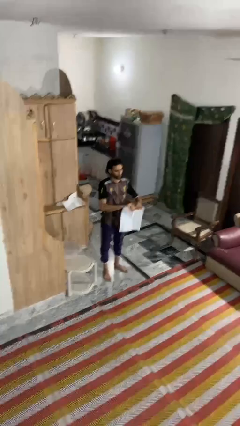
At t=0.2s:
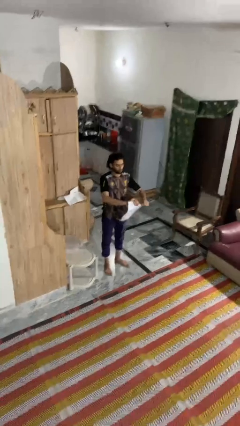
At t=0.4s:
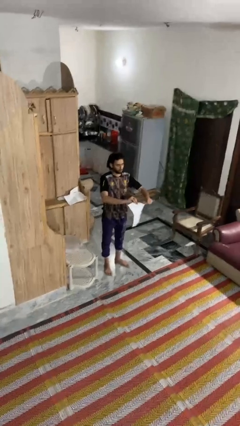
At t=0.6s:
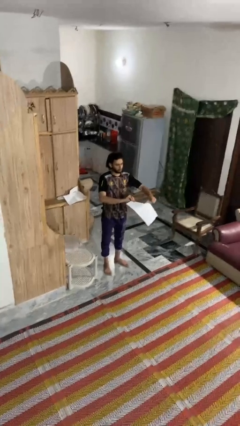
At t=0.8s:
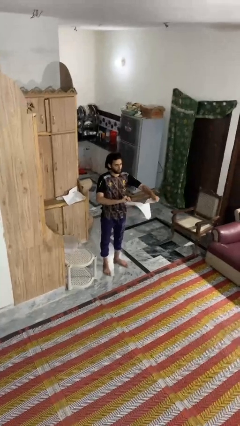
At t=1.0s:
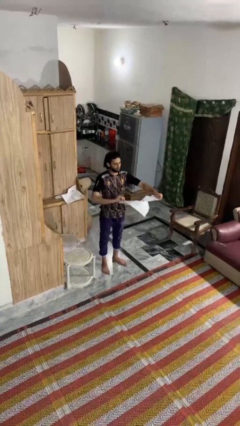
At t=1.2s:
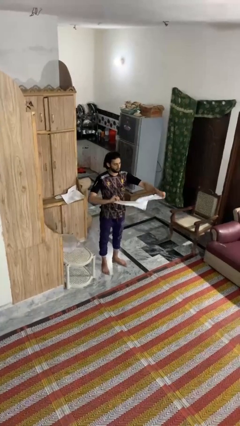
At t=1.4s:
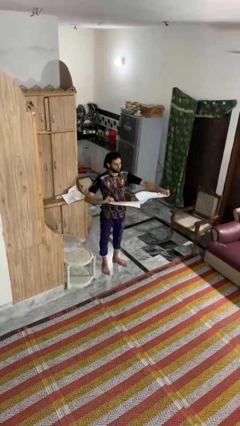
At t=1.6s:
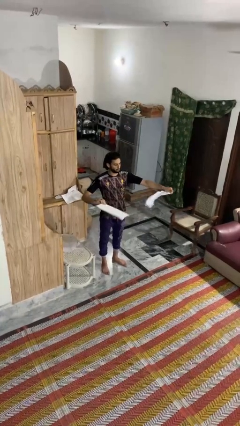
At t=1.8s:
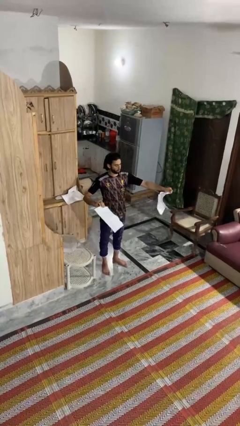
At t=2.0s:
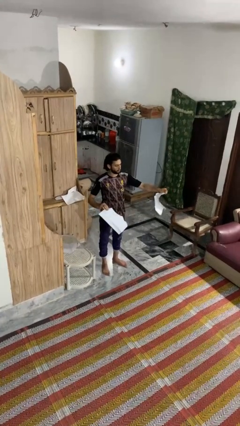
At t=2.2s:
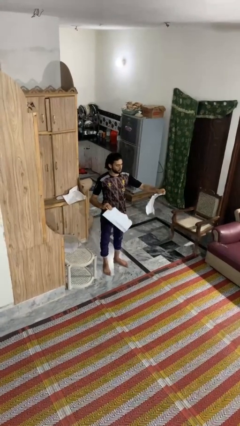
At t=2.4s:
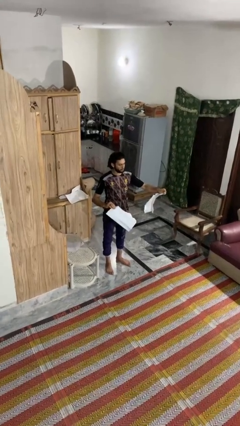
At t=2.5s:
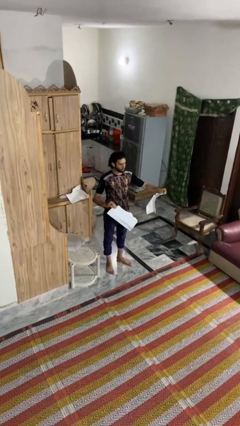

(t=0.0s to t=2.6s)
person tears paper

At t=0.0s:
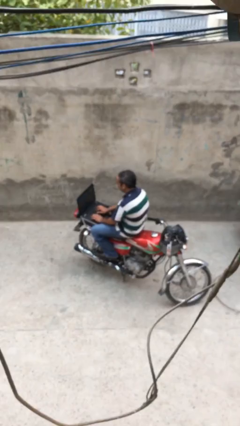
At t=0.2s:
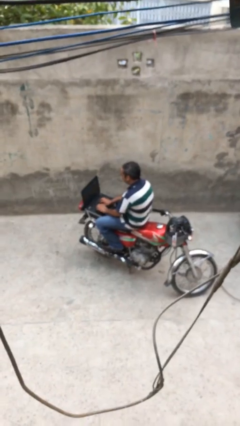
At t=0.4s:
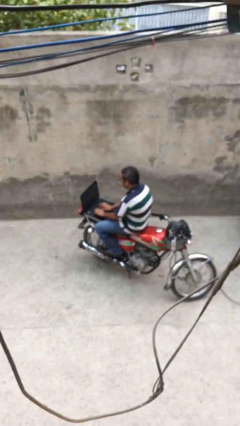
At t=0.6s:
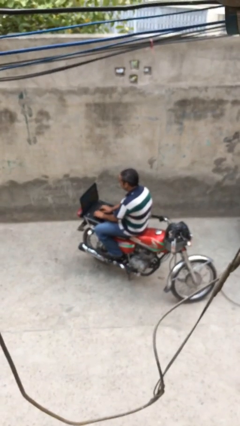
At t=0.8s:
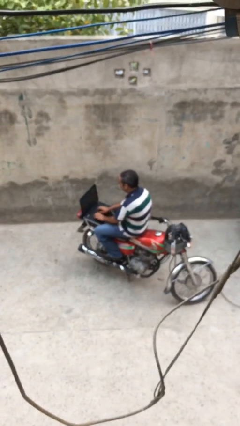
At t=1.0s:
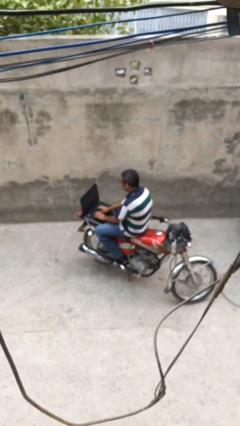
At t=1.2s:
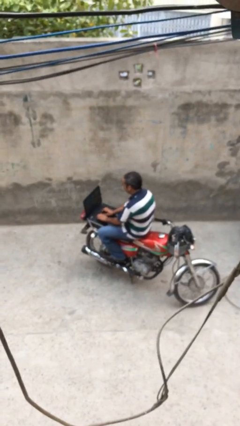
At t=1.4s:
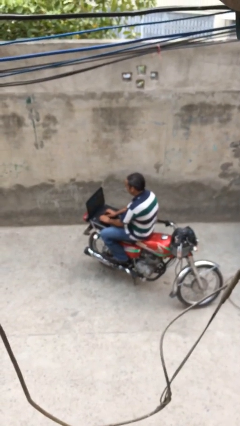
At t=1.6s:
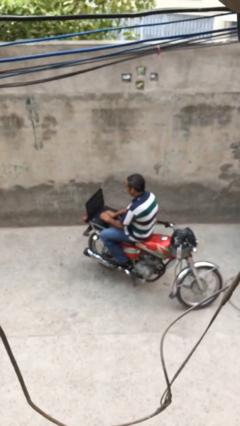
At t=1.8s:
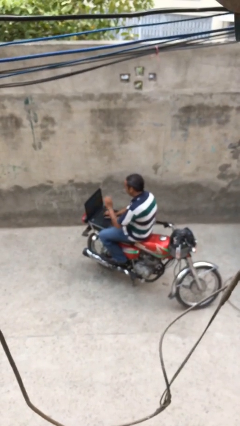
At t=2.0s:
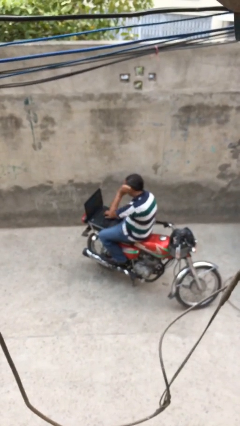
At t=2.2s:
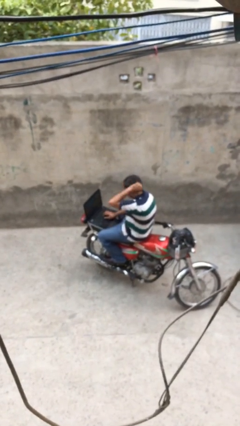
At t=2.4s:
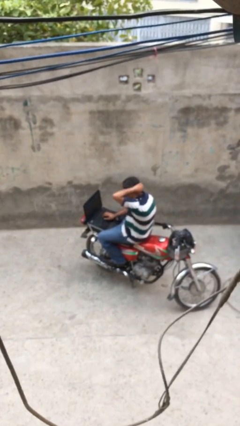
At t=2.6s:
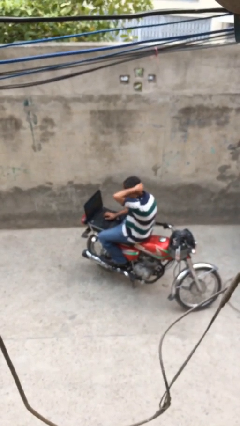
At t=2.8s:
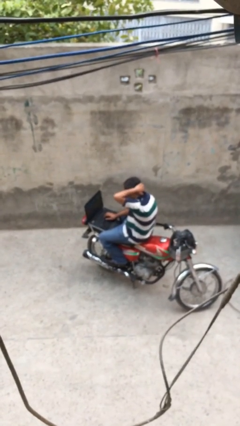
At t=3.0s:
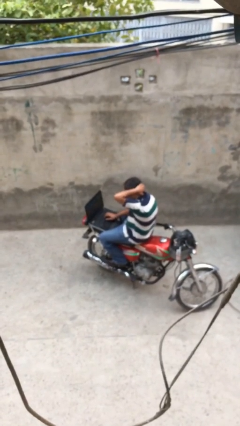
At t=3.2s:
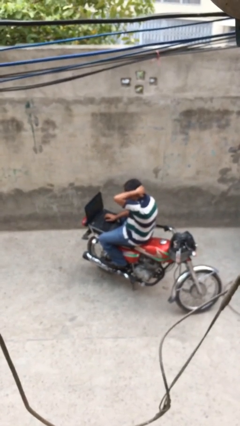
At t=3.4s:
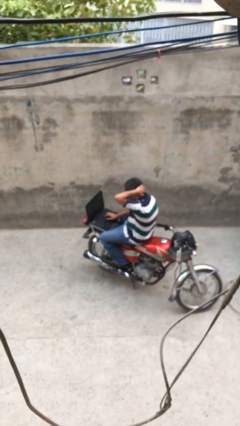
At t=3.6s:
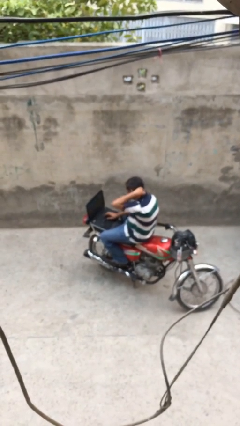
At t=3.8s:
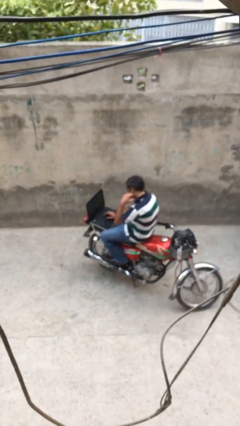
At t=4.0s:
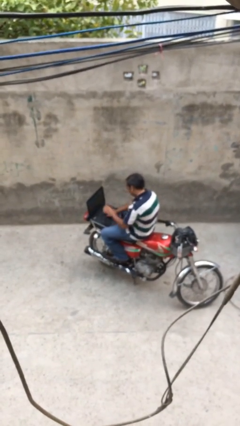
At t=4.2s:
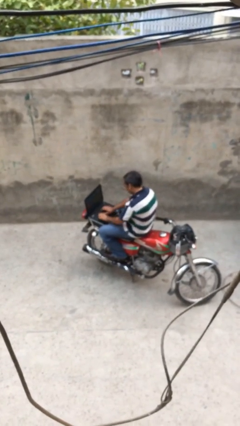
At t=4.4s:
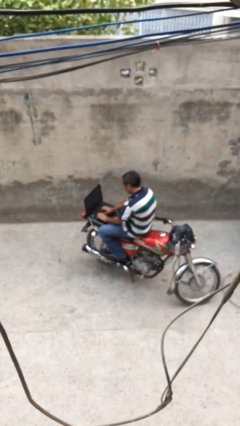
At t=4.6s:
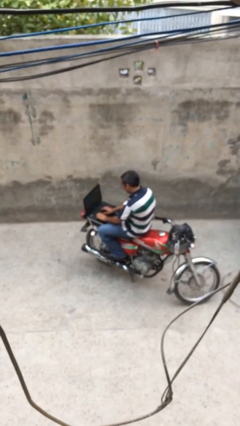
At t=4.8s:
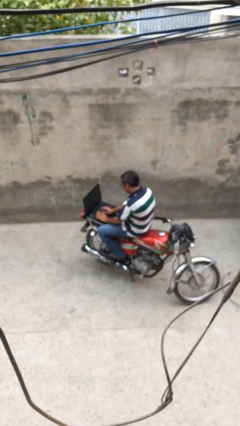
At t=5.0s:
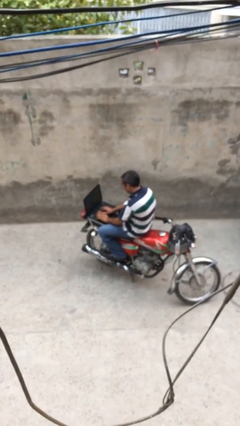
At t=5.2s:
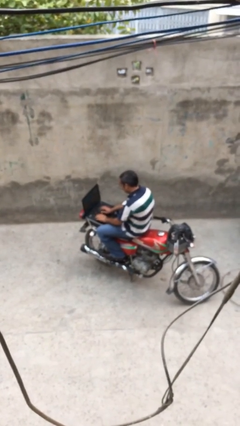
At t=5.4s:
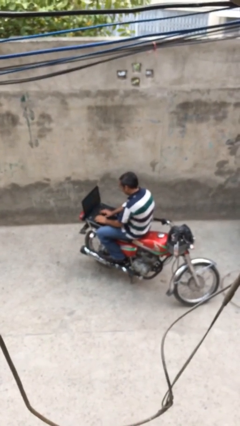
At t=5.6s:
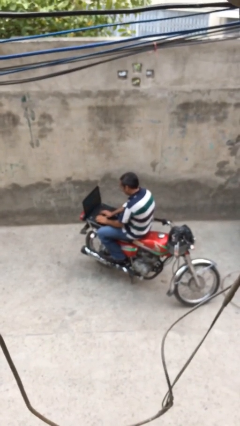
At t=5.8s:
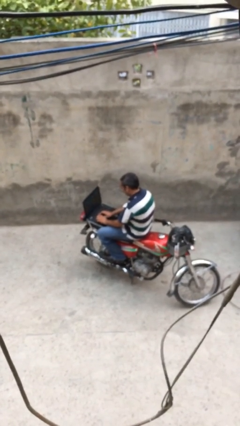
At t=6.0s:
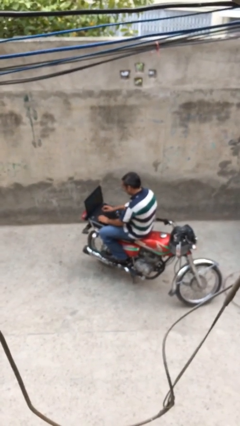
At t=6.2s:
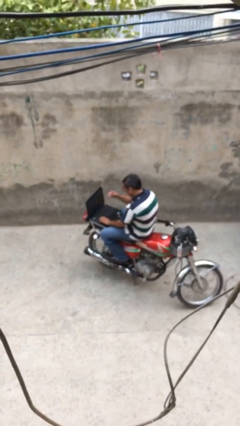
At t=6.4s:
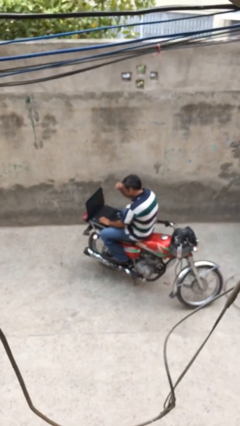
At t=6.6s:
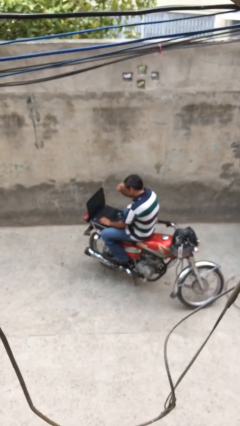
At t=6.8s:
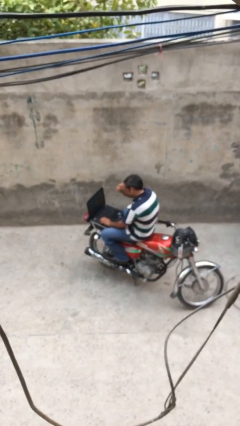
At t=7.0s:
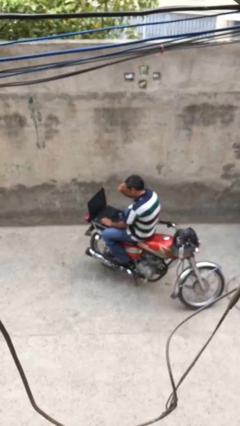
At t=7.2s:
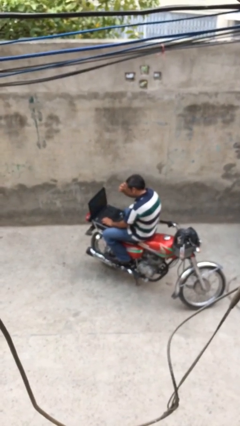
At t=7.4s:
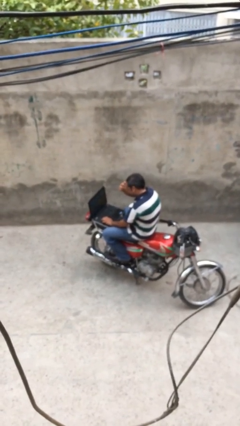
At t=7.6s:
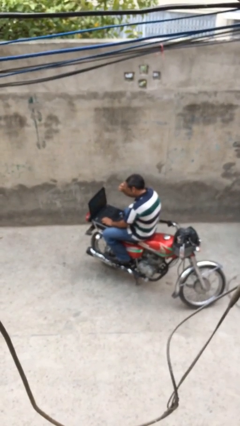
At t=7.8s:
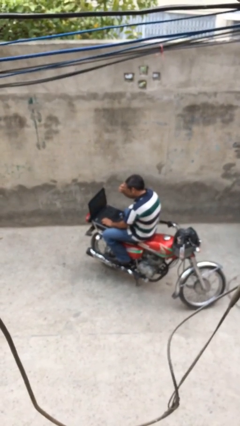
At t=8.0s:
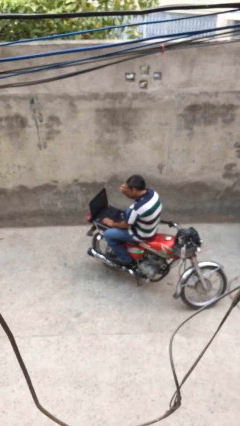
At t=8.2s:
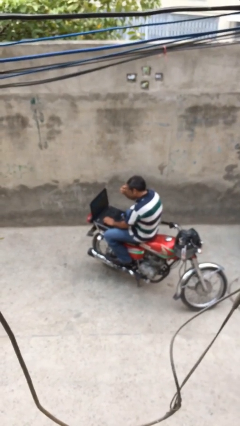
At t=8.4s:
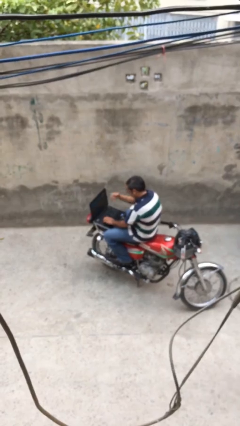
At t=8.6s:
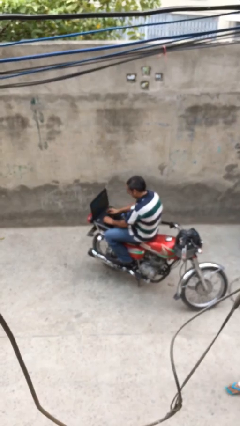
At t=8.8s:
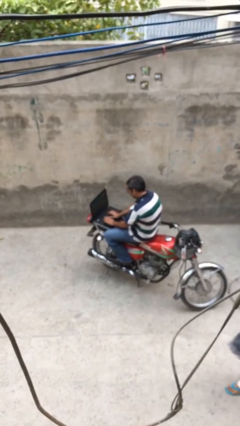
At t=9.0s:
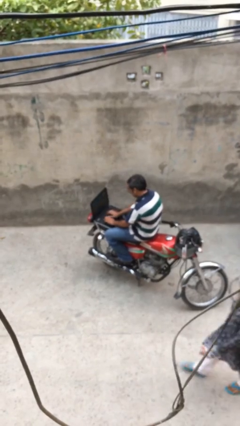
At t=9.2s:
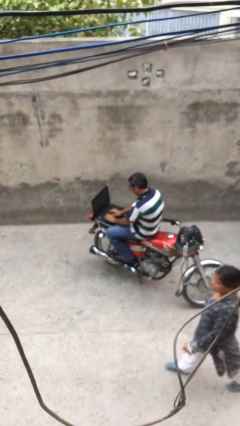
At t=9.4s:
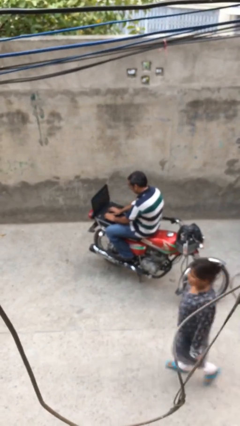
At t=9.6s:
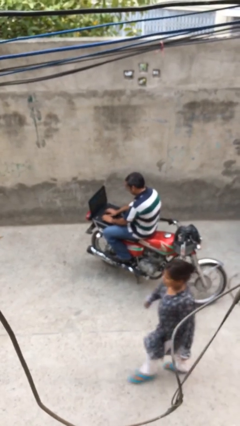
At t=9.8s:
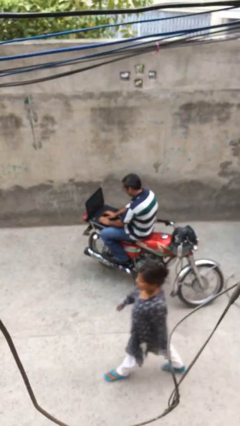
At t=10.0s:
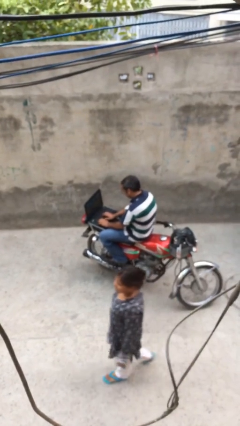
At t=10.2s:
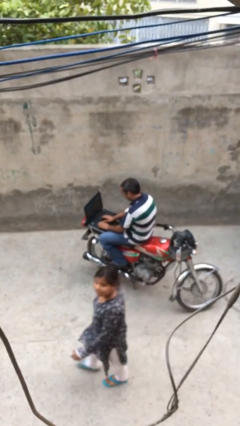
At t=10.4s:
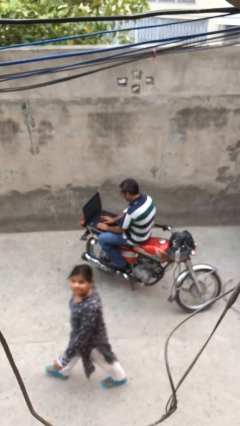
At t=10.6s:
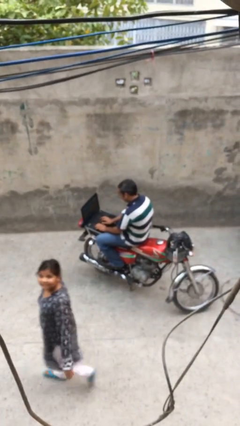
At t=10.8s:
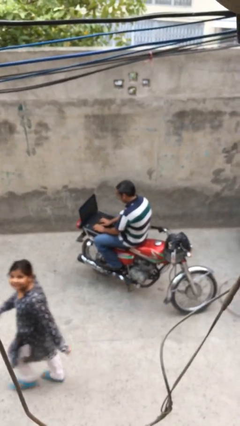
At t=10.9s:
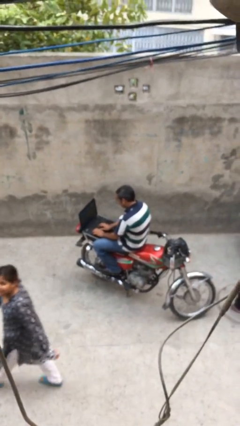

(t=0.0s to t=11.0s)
person interacts with laptop

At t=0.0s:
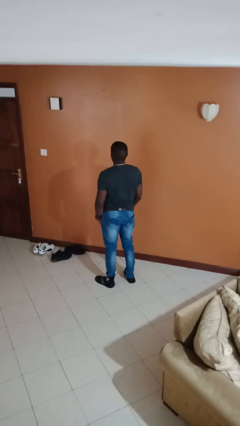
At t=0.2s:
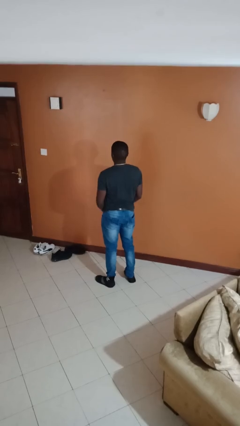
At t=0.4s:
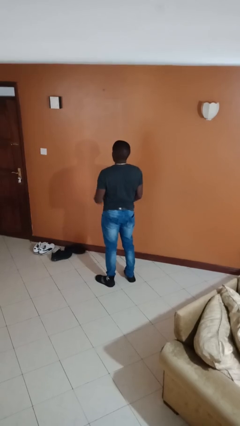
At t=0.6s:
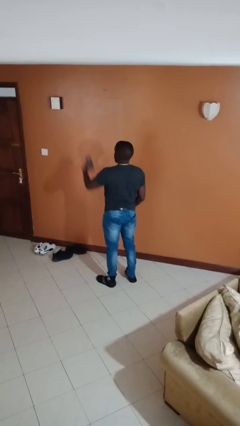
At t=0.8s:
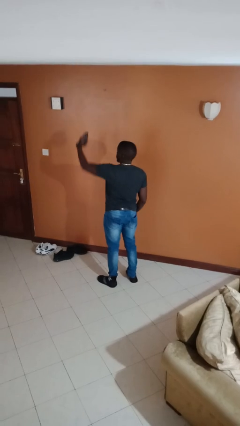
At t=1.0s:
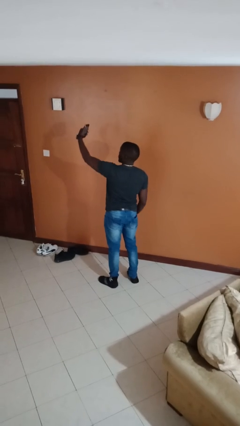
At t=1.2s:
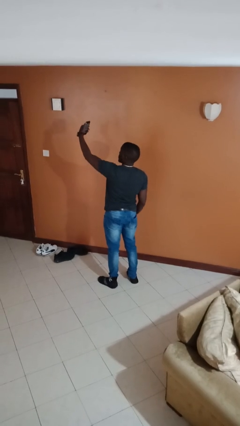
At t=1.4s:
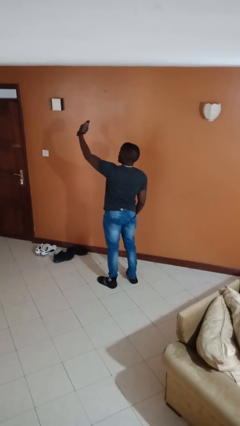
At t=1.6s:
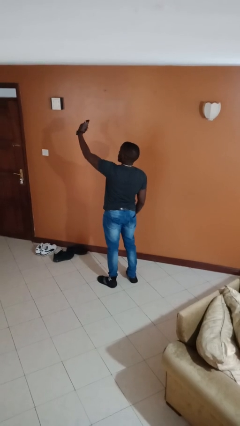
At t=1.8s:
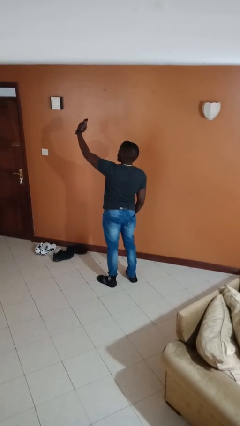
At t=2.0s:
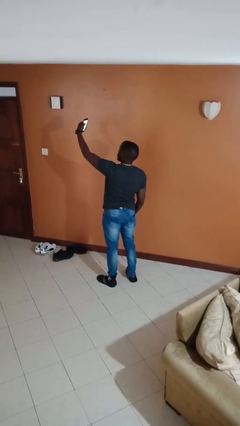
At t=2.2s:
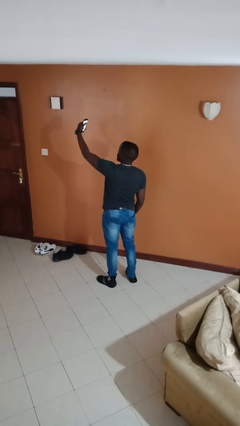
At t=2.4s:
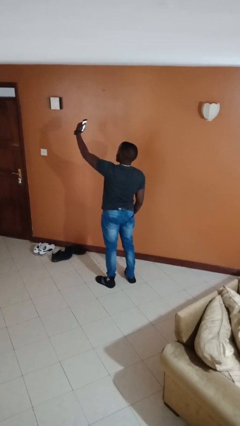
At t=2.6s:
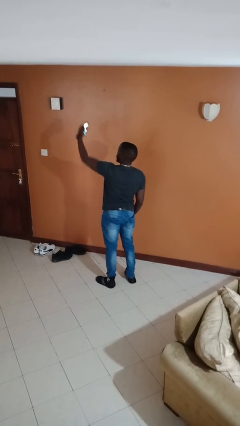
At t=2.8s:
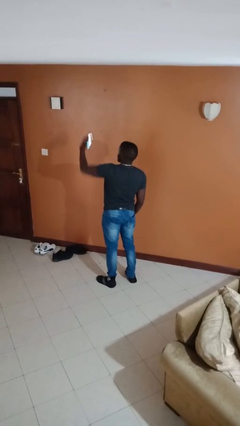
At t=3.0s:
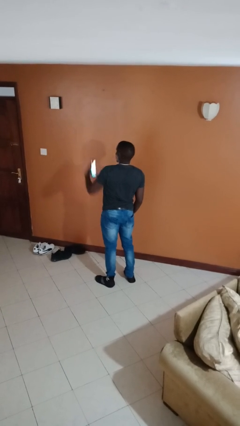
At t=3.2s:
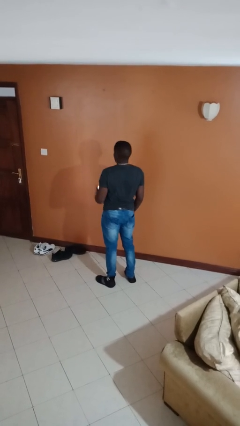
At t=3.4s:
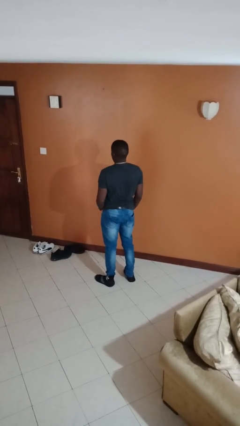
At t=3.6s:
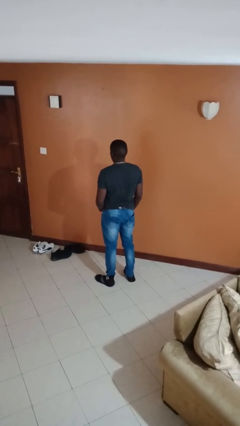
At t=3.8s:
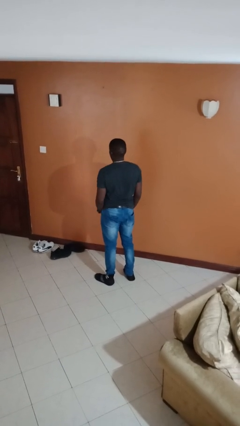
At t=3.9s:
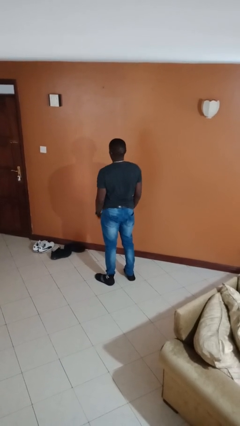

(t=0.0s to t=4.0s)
person takes selfie
